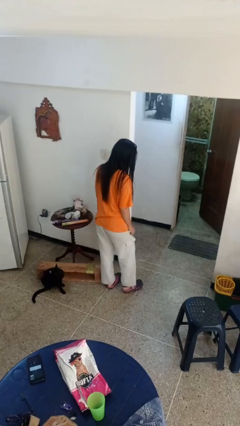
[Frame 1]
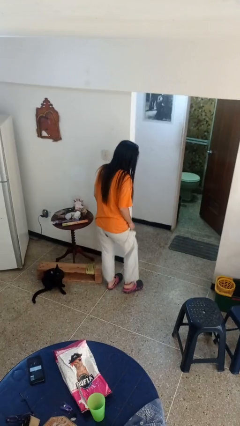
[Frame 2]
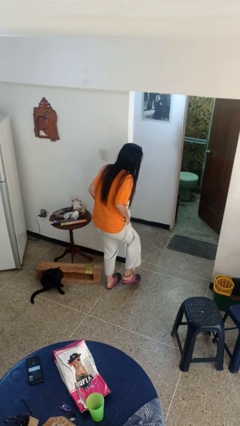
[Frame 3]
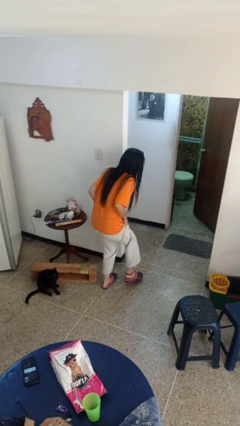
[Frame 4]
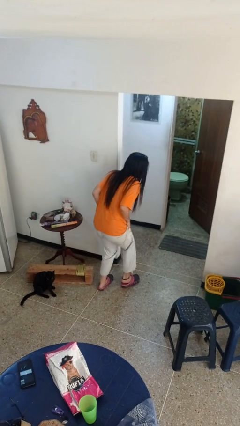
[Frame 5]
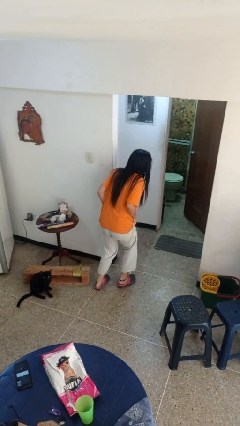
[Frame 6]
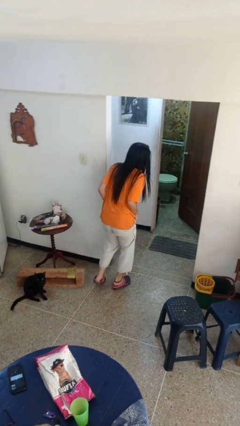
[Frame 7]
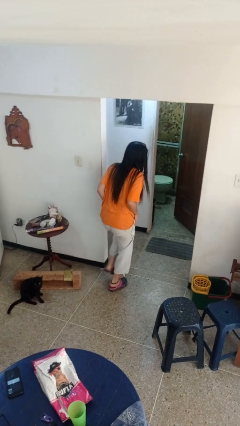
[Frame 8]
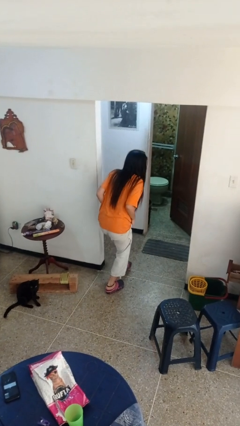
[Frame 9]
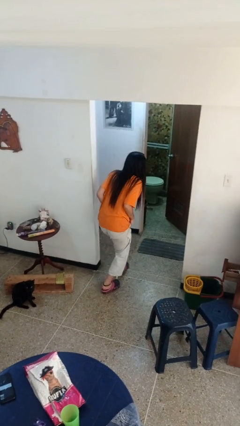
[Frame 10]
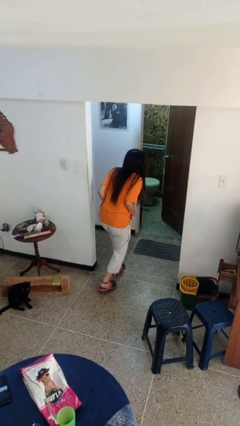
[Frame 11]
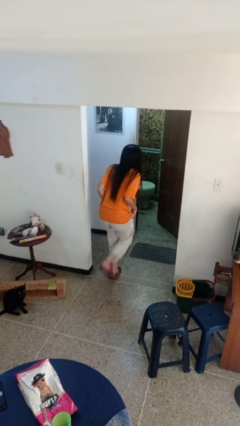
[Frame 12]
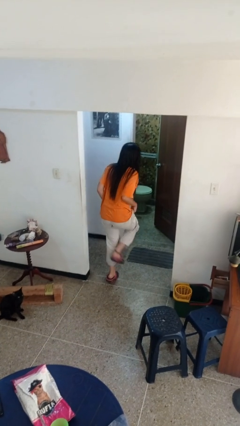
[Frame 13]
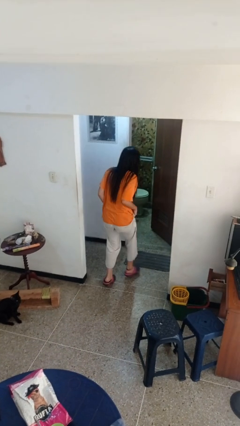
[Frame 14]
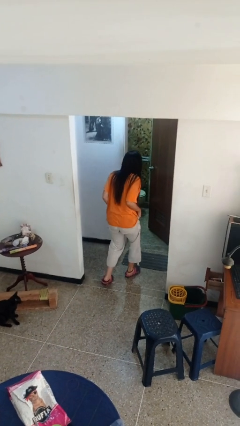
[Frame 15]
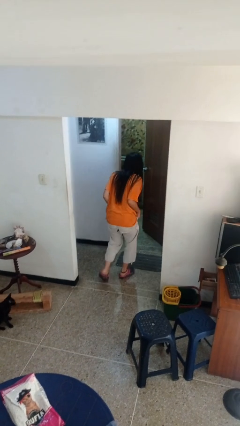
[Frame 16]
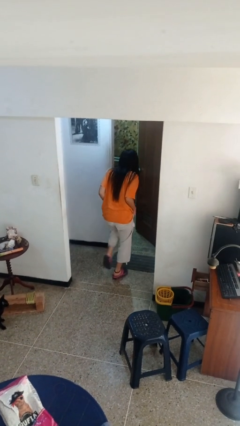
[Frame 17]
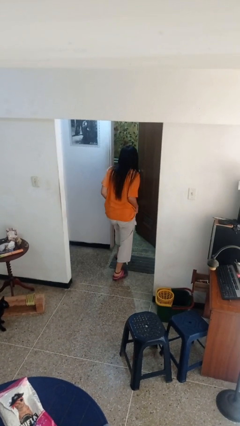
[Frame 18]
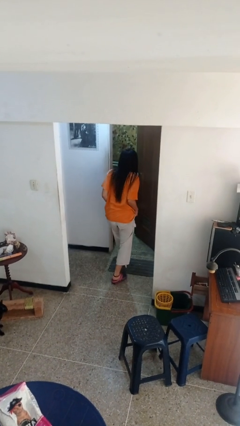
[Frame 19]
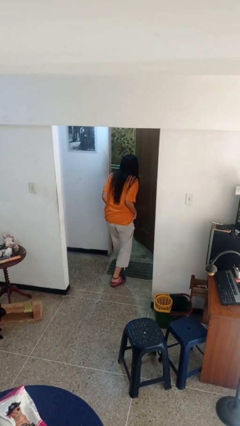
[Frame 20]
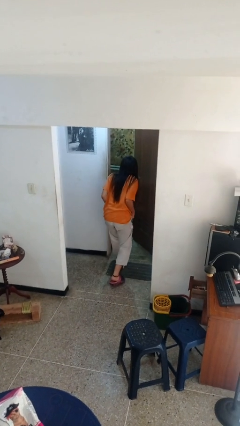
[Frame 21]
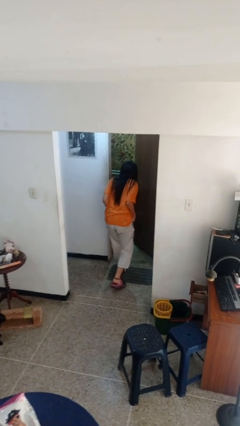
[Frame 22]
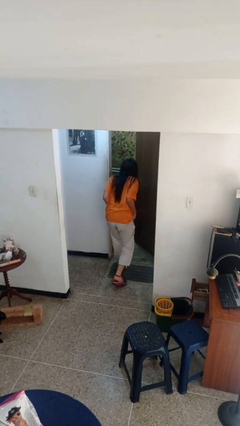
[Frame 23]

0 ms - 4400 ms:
person walks tiptoe

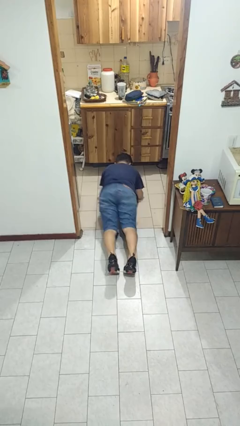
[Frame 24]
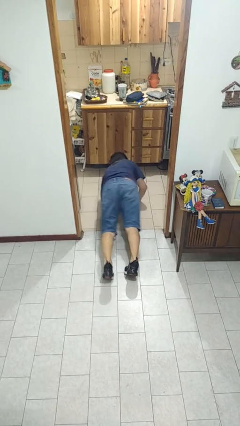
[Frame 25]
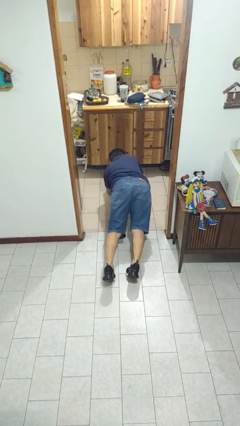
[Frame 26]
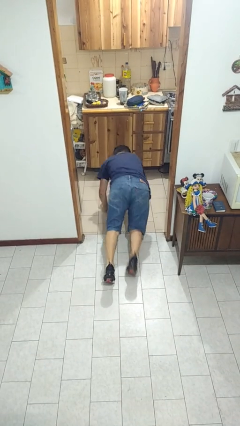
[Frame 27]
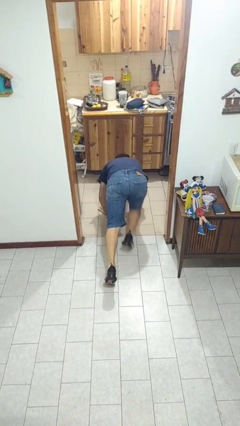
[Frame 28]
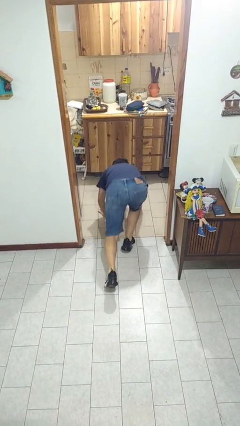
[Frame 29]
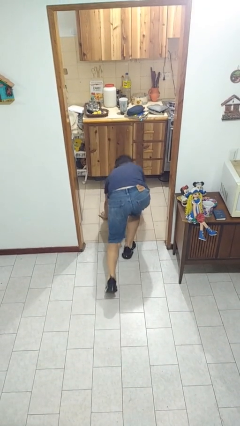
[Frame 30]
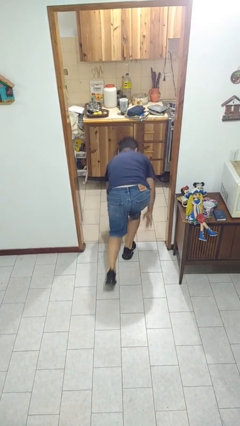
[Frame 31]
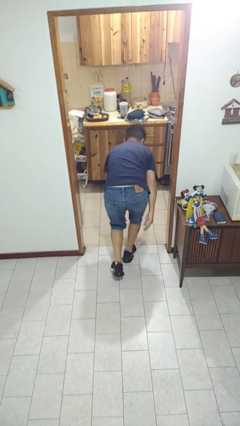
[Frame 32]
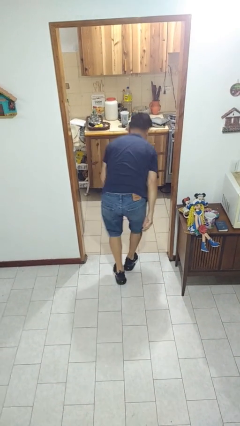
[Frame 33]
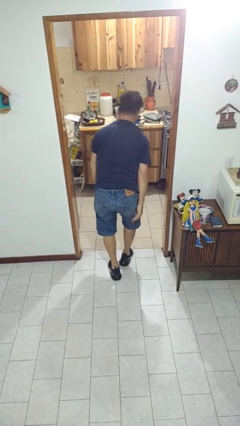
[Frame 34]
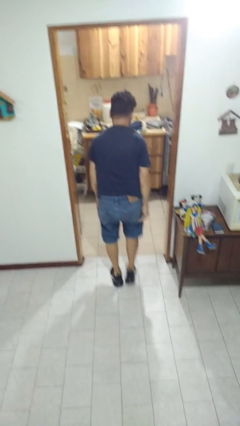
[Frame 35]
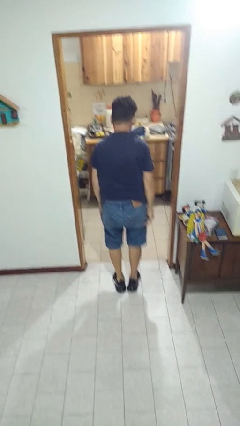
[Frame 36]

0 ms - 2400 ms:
person stands up from floor

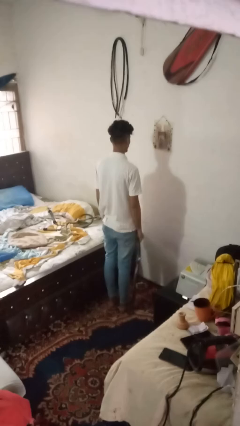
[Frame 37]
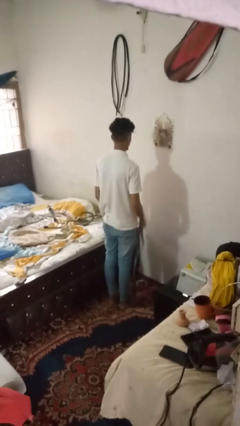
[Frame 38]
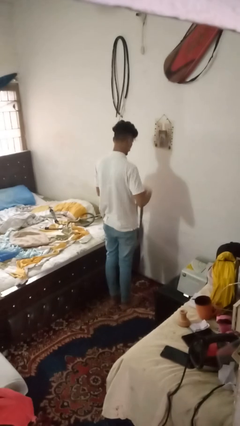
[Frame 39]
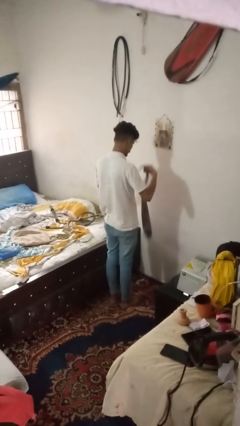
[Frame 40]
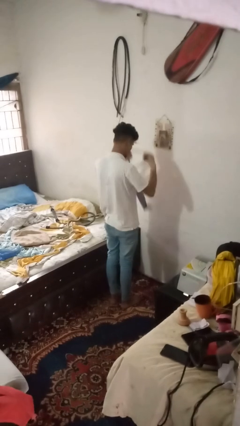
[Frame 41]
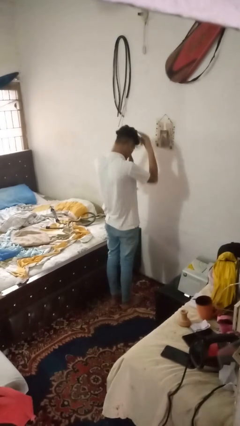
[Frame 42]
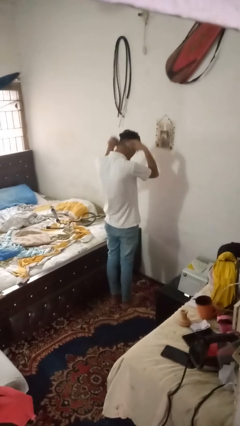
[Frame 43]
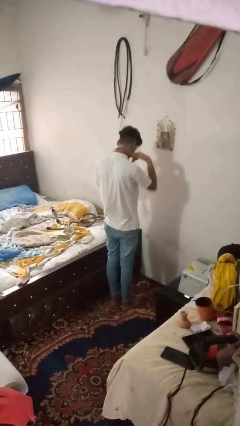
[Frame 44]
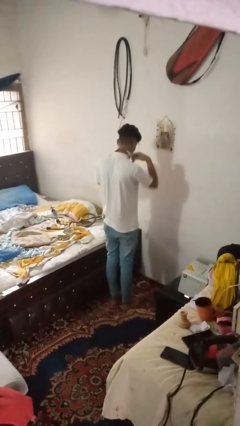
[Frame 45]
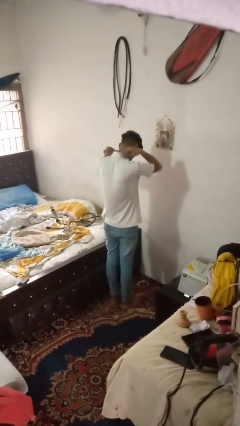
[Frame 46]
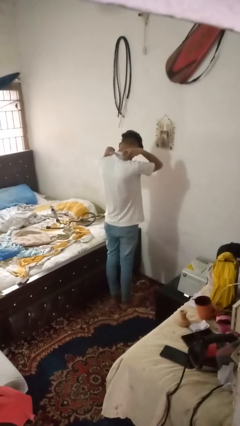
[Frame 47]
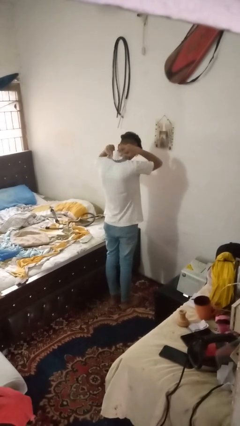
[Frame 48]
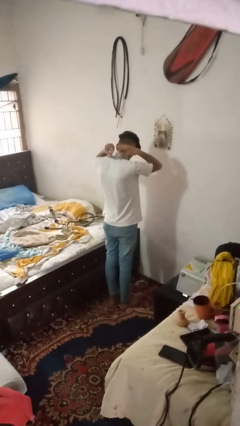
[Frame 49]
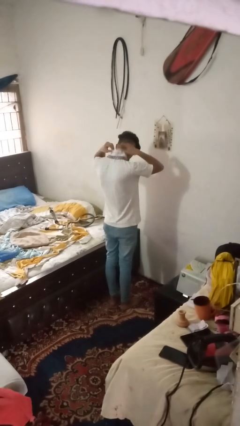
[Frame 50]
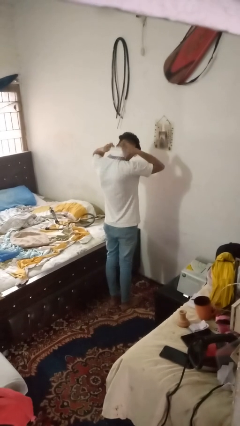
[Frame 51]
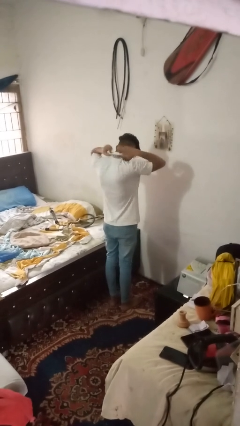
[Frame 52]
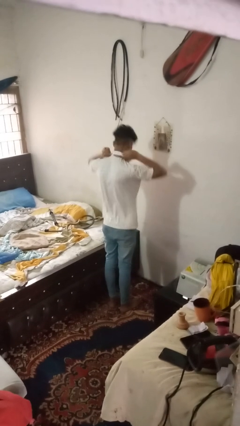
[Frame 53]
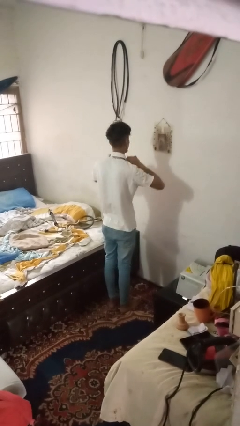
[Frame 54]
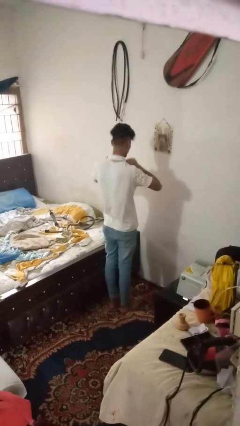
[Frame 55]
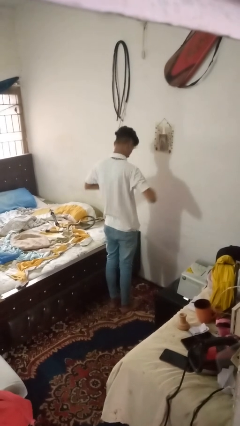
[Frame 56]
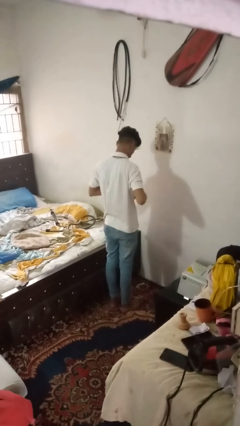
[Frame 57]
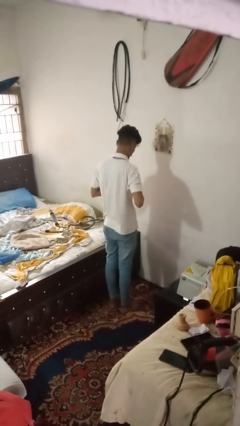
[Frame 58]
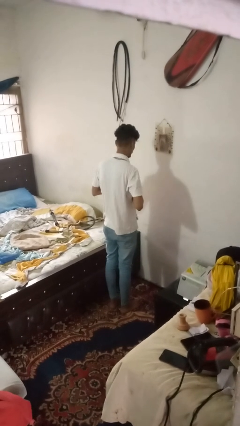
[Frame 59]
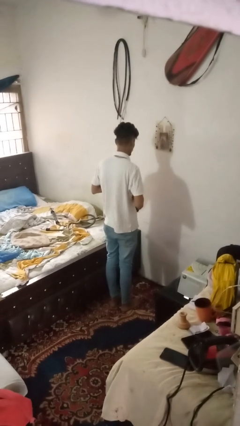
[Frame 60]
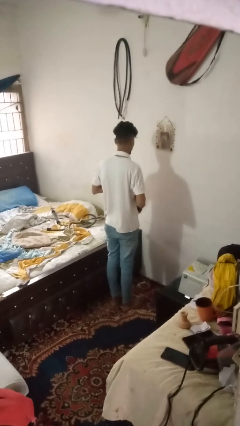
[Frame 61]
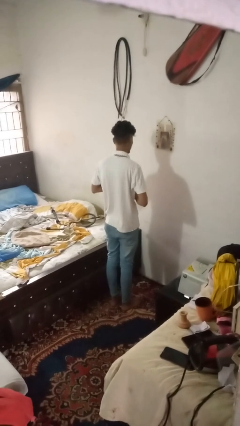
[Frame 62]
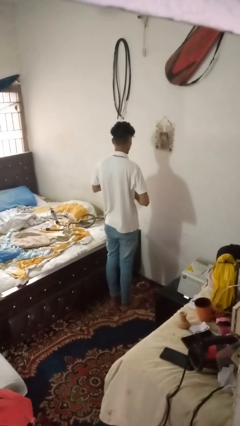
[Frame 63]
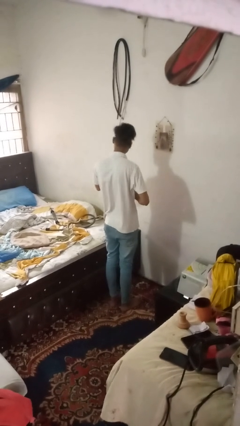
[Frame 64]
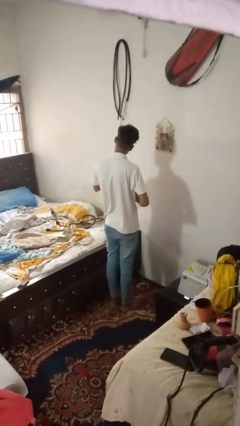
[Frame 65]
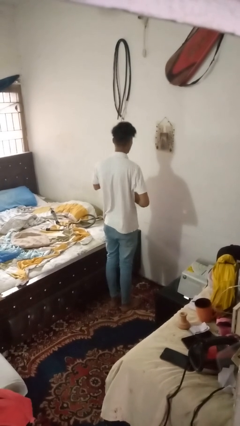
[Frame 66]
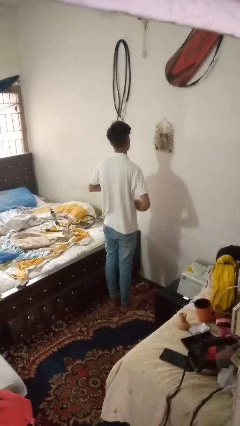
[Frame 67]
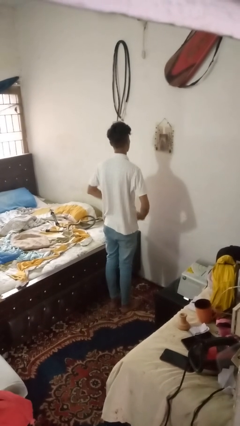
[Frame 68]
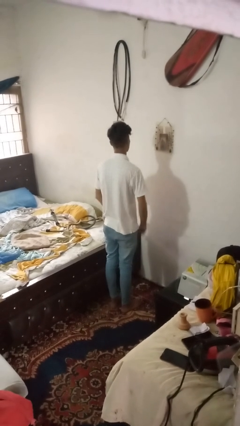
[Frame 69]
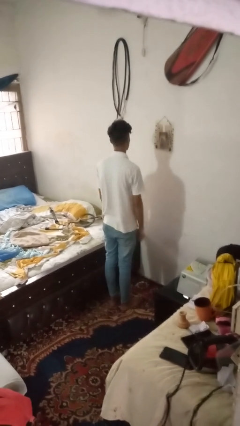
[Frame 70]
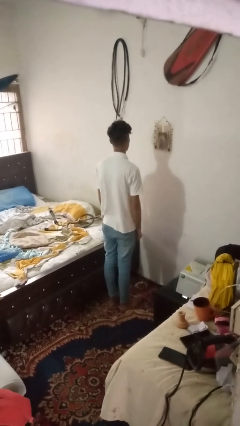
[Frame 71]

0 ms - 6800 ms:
person puts on necktie

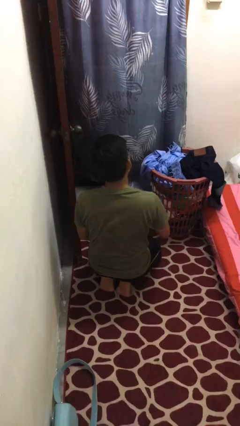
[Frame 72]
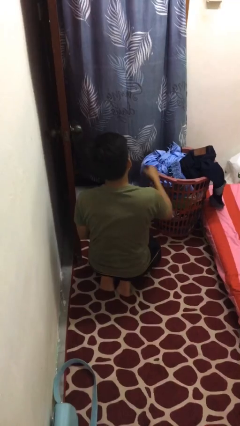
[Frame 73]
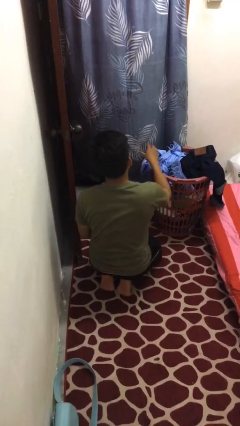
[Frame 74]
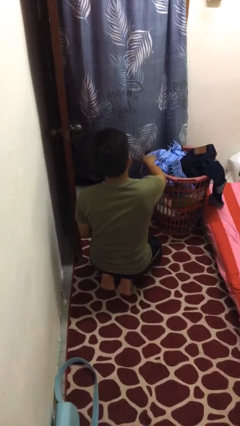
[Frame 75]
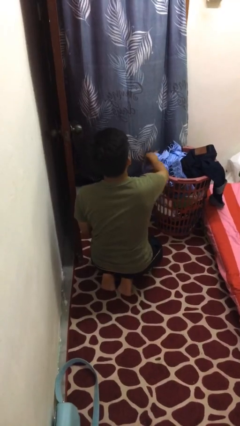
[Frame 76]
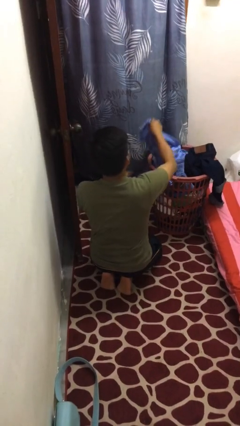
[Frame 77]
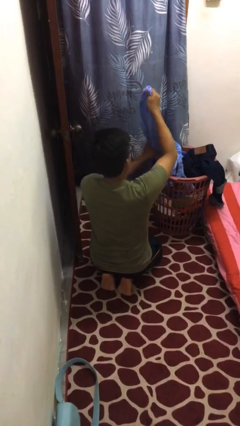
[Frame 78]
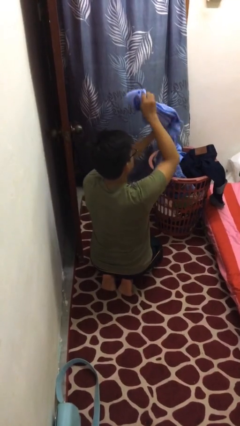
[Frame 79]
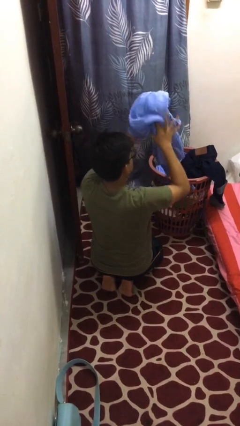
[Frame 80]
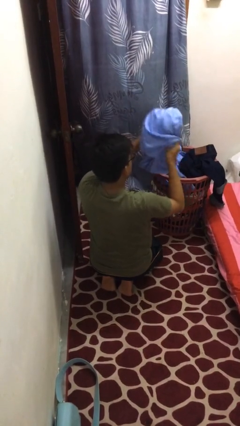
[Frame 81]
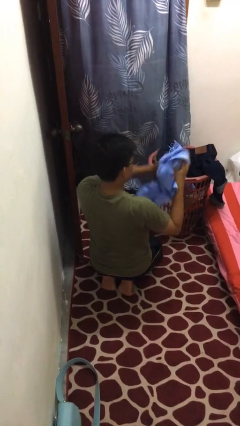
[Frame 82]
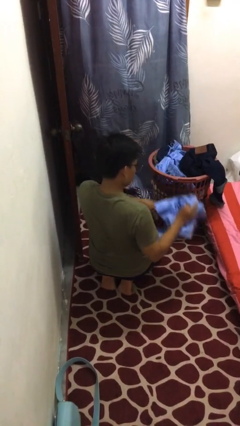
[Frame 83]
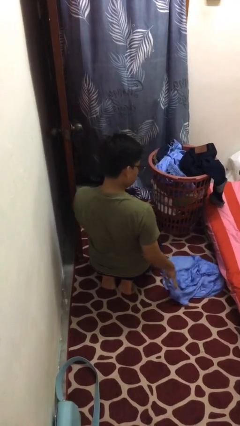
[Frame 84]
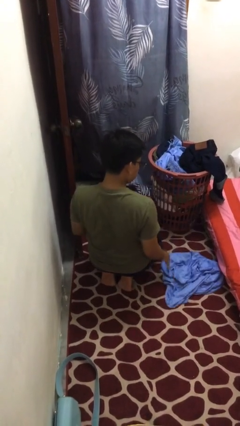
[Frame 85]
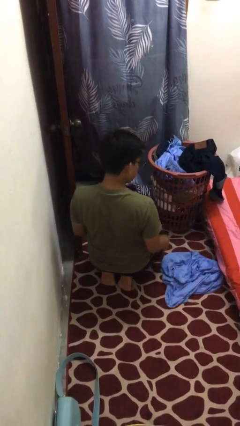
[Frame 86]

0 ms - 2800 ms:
person takes object from basket

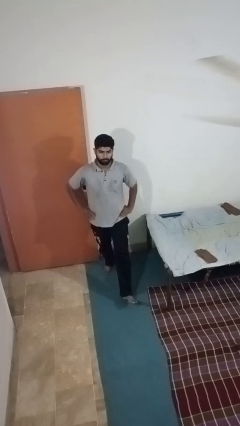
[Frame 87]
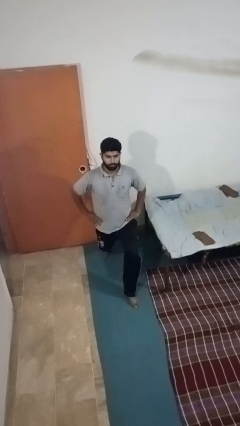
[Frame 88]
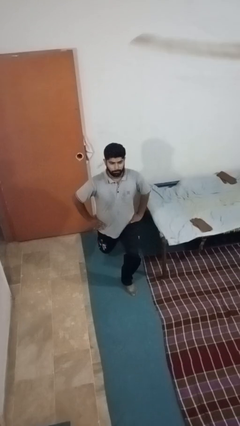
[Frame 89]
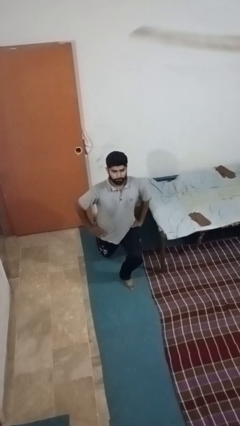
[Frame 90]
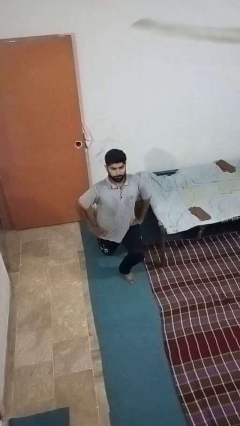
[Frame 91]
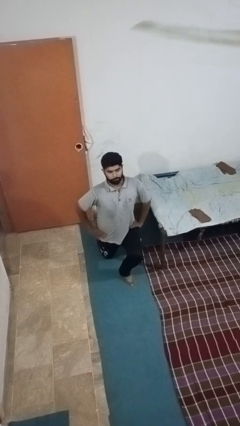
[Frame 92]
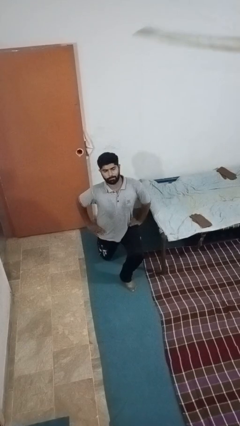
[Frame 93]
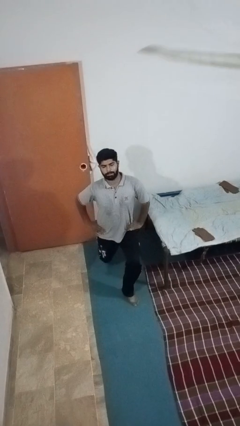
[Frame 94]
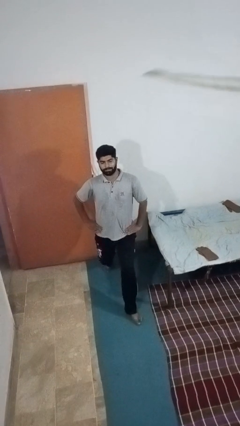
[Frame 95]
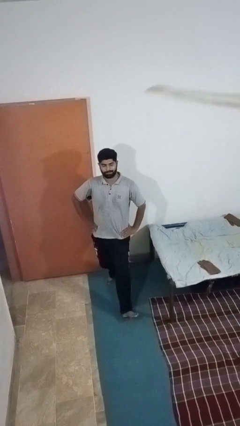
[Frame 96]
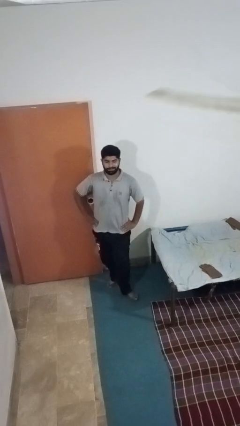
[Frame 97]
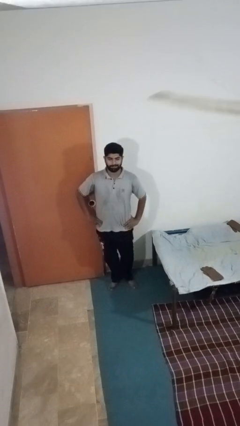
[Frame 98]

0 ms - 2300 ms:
person exercises with lunges
